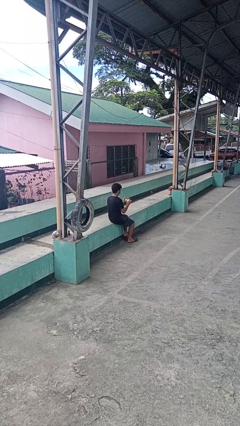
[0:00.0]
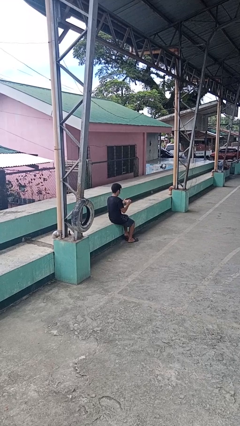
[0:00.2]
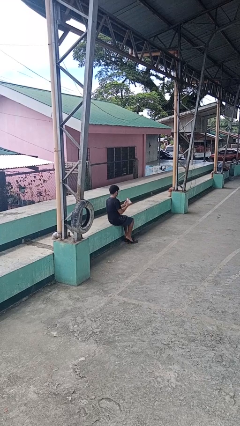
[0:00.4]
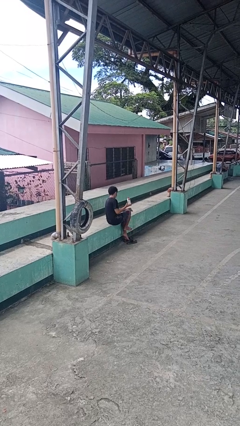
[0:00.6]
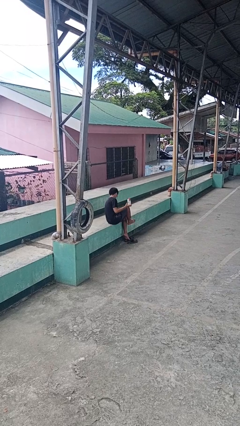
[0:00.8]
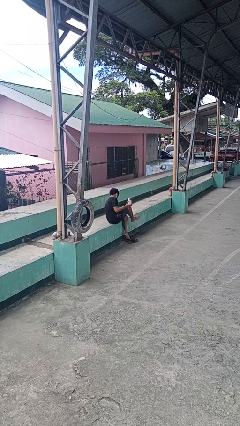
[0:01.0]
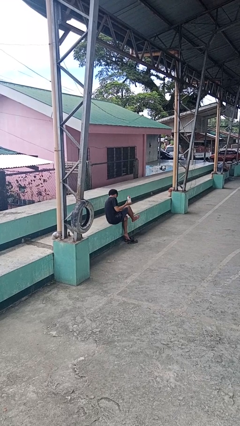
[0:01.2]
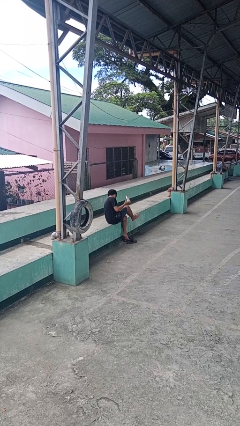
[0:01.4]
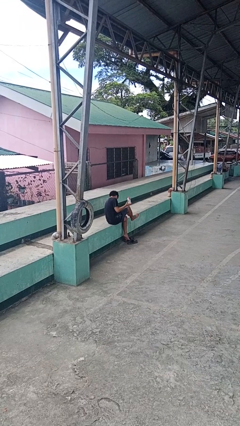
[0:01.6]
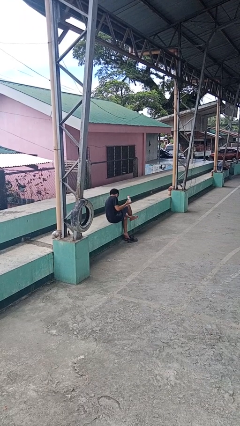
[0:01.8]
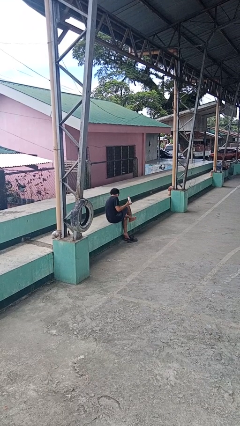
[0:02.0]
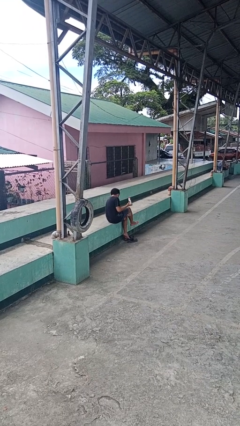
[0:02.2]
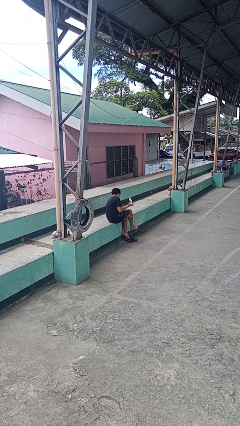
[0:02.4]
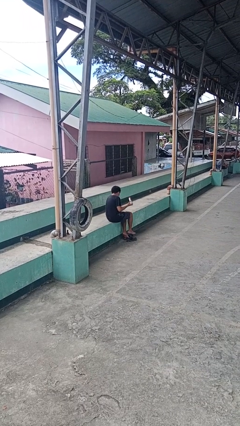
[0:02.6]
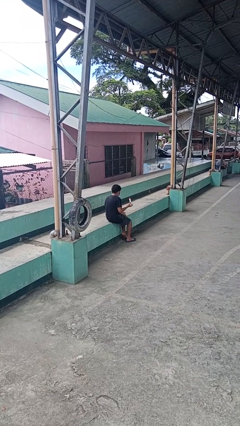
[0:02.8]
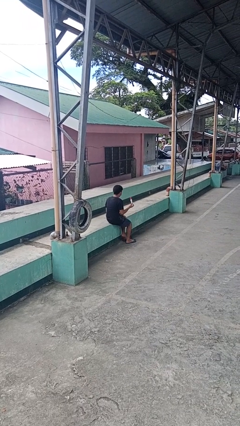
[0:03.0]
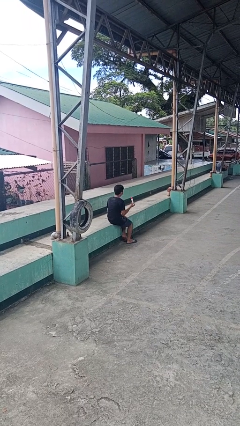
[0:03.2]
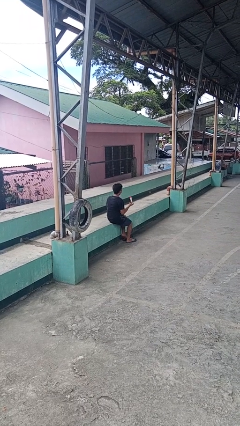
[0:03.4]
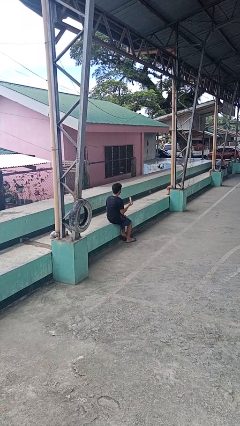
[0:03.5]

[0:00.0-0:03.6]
person applies sunscreen

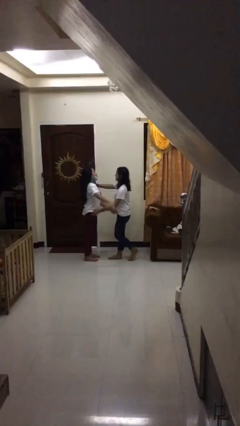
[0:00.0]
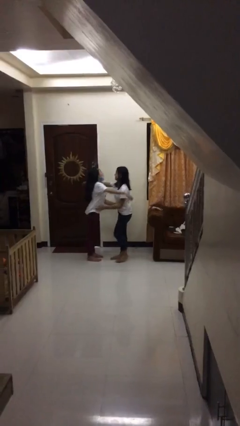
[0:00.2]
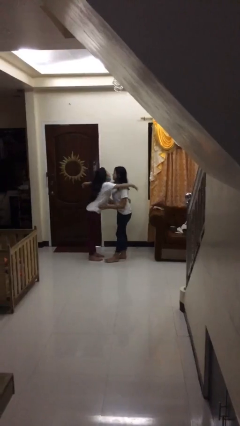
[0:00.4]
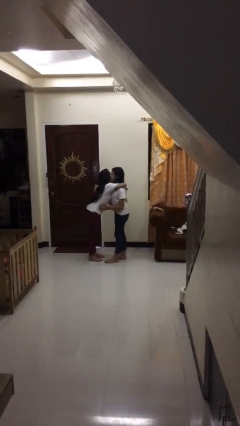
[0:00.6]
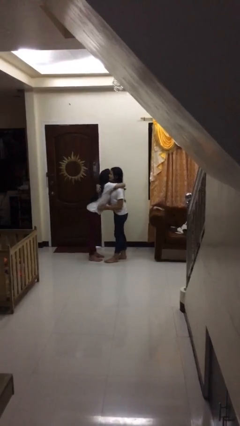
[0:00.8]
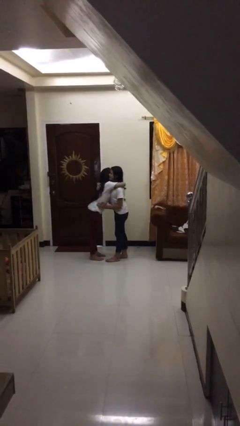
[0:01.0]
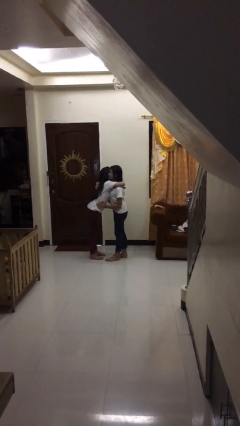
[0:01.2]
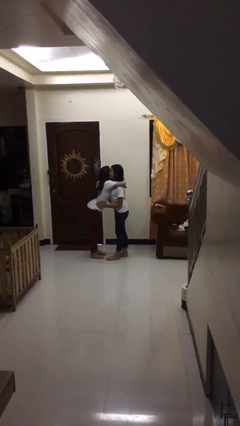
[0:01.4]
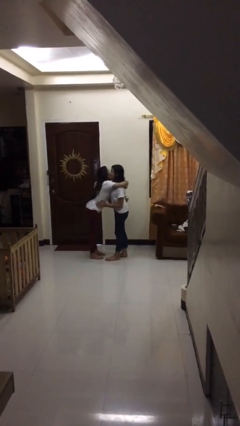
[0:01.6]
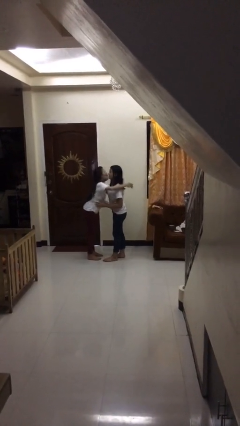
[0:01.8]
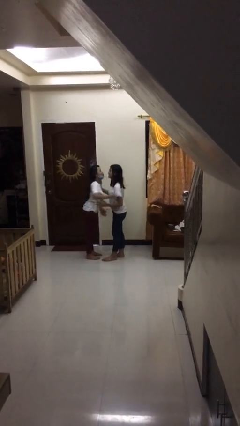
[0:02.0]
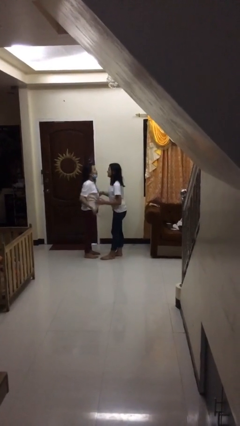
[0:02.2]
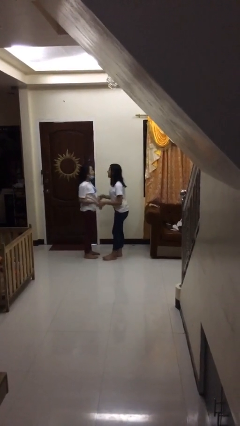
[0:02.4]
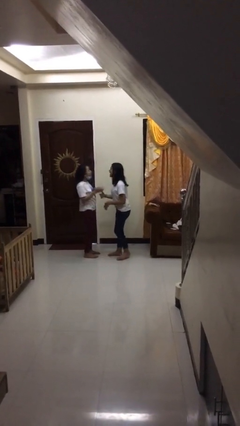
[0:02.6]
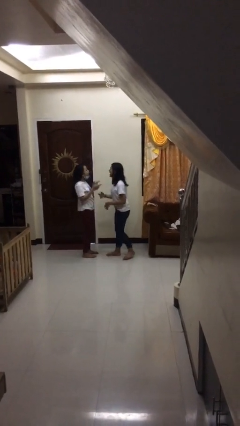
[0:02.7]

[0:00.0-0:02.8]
person embraces person

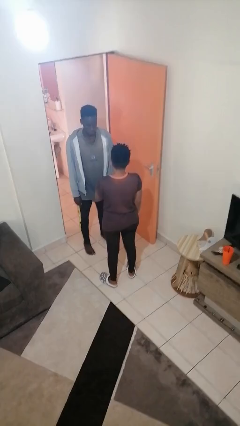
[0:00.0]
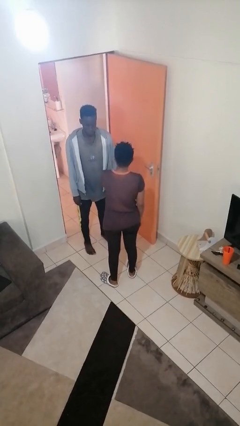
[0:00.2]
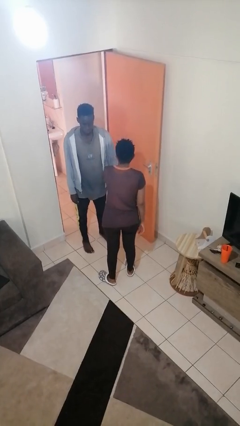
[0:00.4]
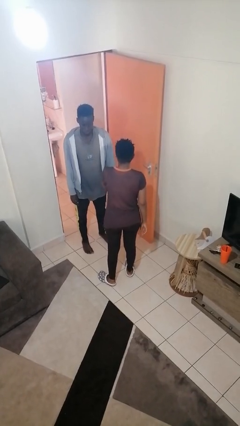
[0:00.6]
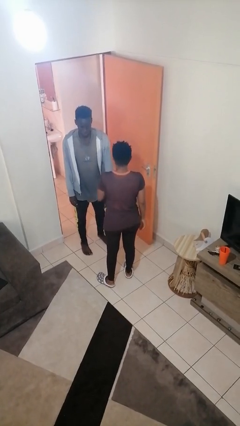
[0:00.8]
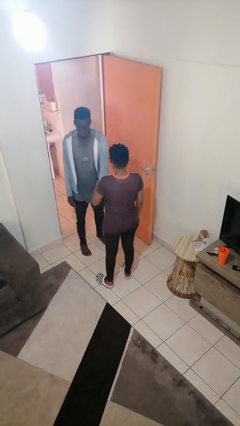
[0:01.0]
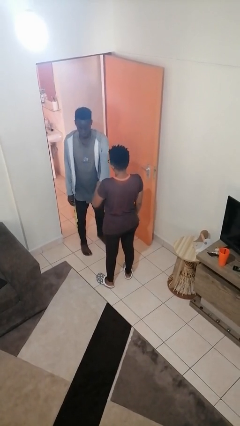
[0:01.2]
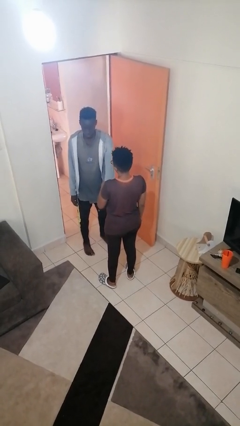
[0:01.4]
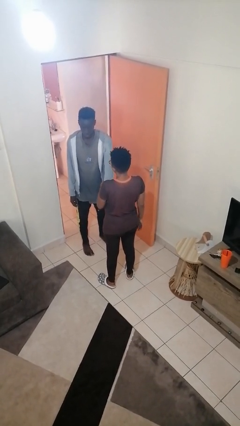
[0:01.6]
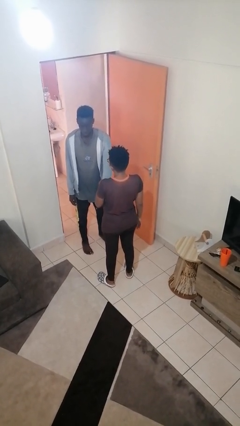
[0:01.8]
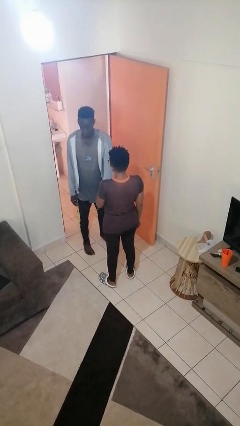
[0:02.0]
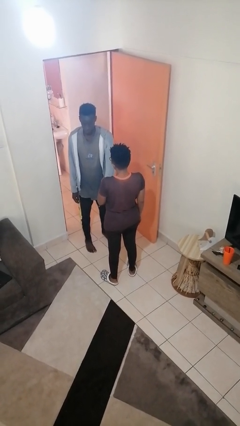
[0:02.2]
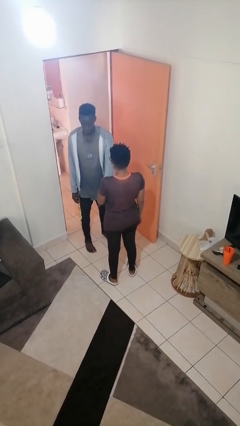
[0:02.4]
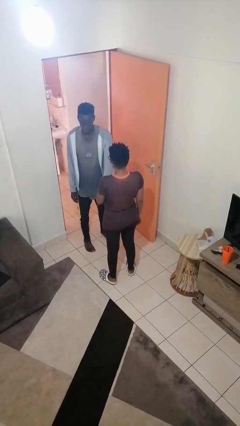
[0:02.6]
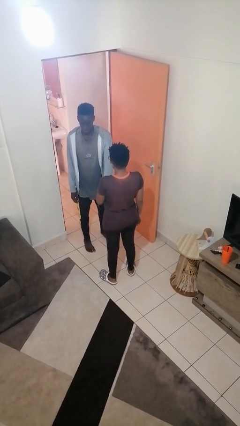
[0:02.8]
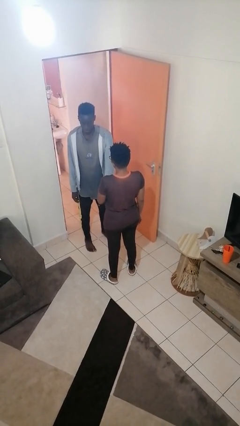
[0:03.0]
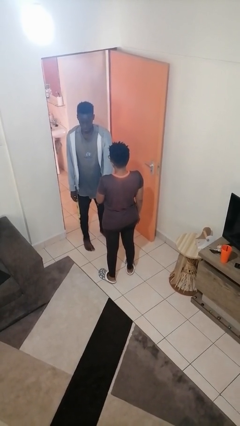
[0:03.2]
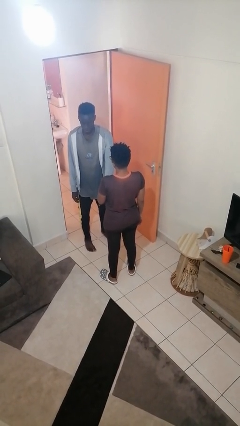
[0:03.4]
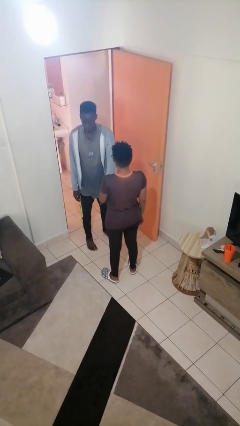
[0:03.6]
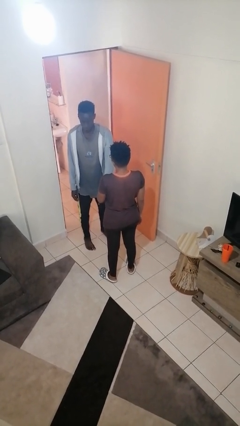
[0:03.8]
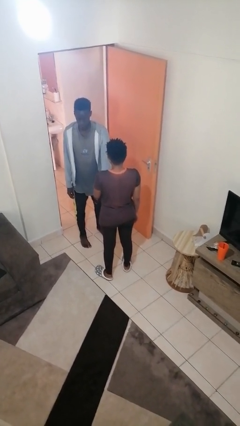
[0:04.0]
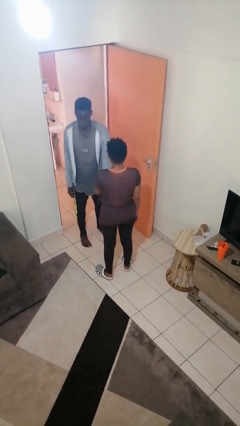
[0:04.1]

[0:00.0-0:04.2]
person grabs person by forearm

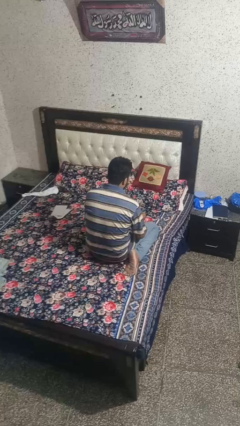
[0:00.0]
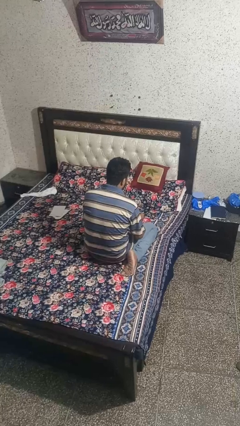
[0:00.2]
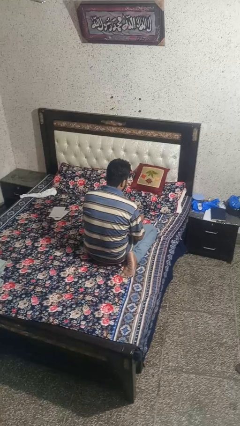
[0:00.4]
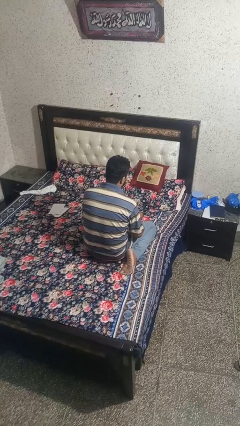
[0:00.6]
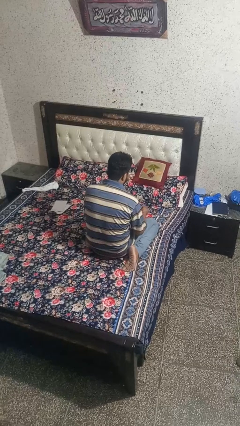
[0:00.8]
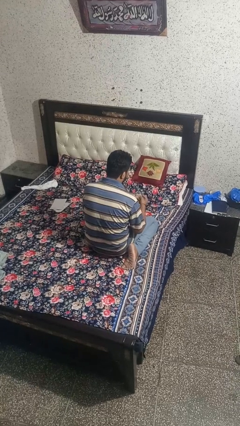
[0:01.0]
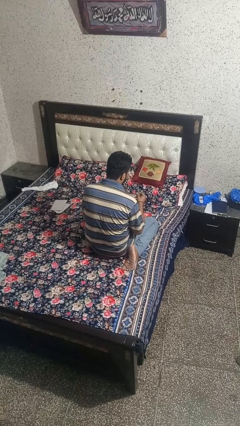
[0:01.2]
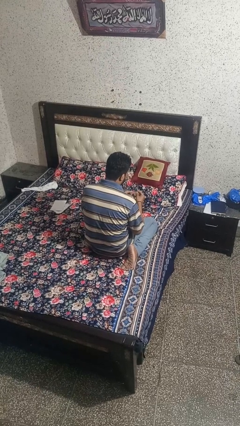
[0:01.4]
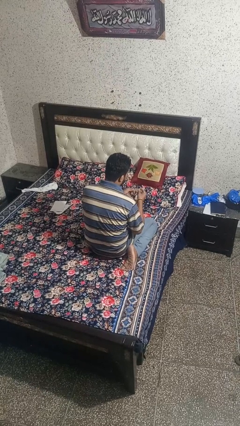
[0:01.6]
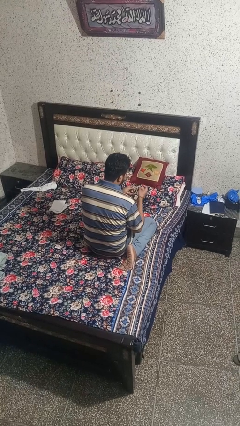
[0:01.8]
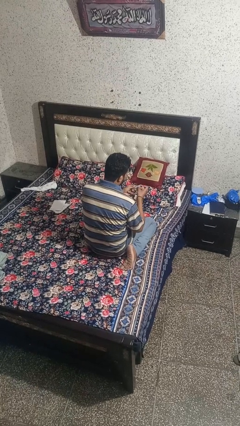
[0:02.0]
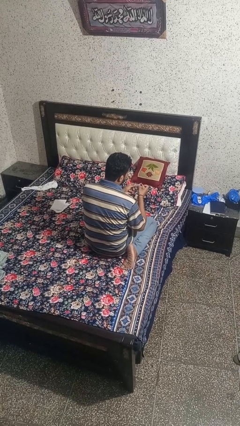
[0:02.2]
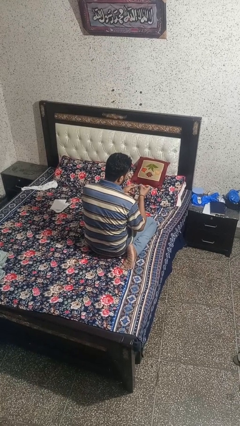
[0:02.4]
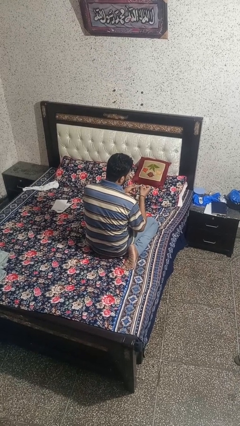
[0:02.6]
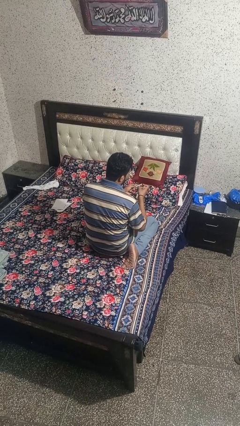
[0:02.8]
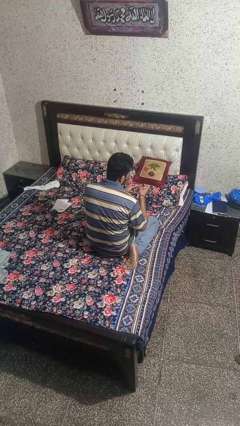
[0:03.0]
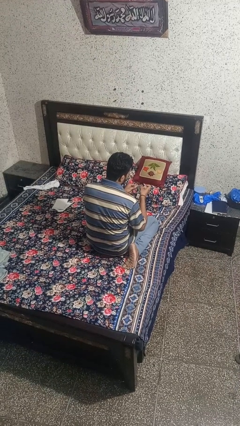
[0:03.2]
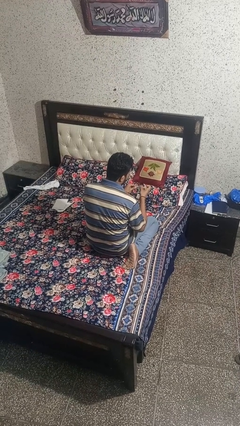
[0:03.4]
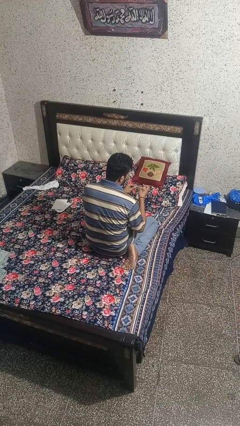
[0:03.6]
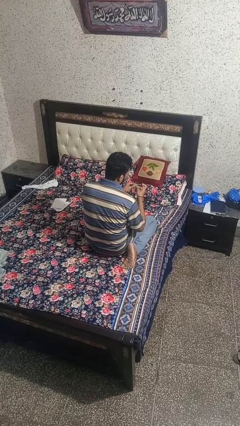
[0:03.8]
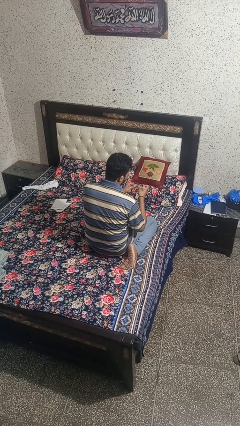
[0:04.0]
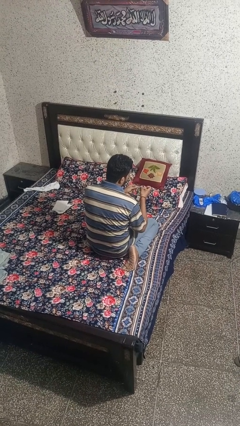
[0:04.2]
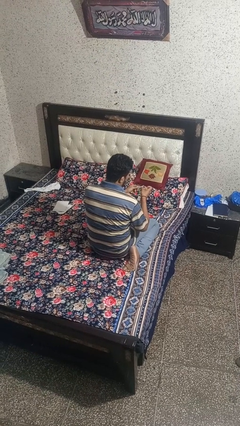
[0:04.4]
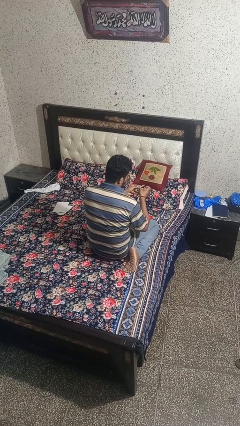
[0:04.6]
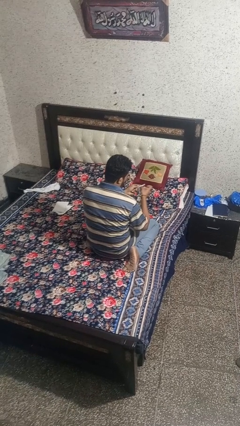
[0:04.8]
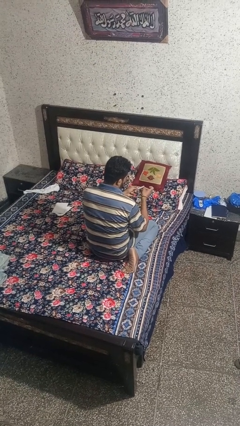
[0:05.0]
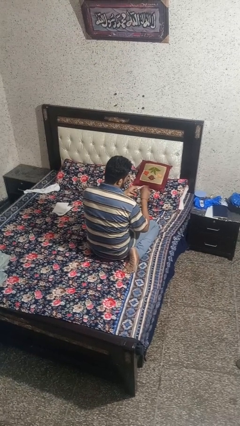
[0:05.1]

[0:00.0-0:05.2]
person files fingernails

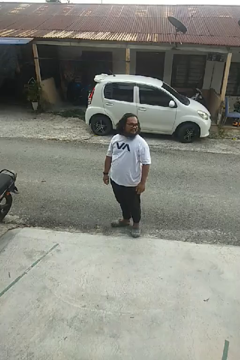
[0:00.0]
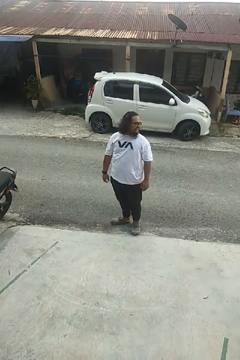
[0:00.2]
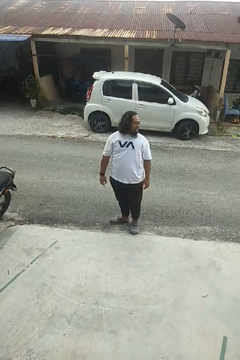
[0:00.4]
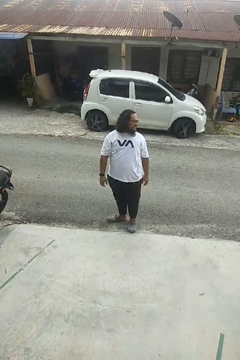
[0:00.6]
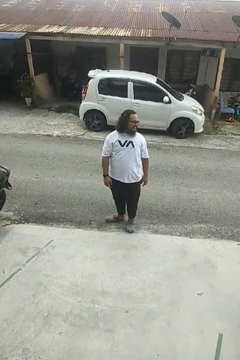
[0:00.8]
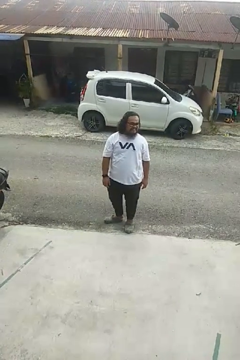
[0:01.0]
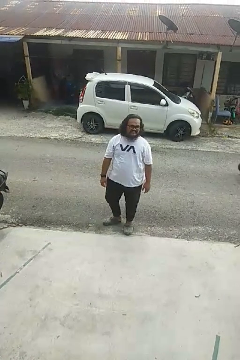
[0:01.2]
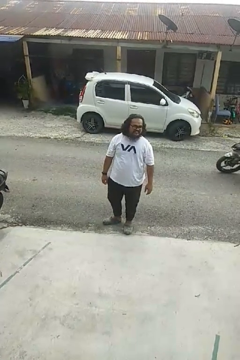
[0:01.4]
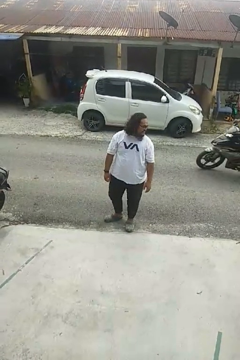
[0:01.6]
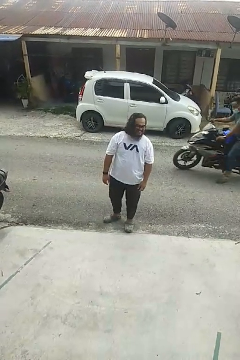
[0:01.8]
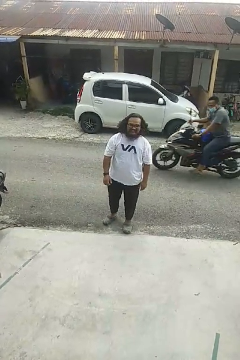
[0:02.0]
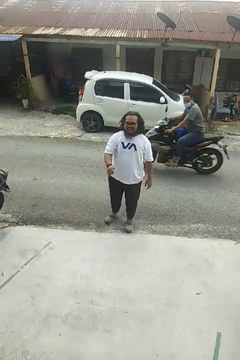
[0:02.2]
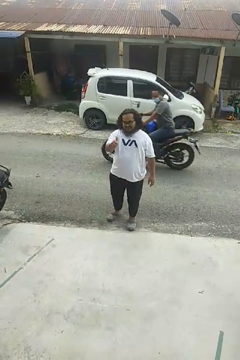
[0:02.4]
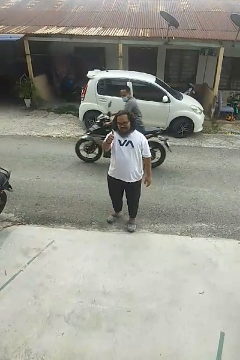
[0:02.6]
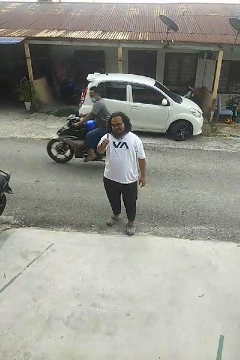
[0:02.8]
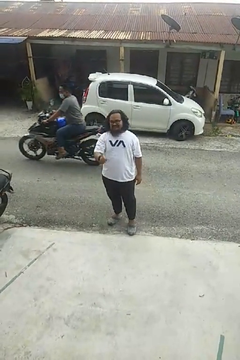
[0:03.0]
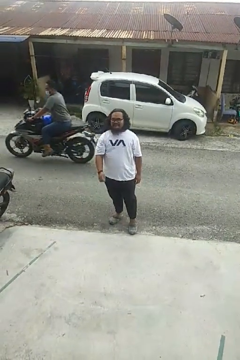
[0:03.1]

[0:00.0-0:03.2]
person gestures thumbs up
